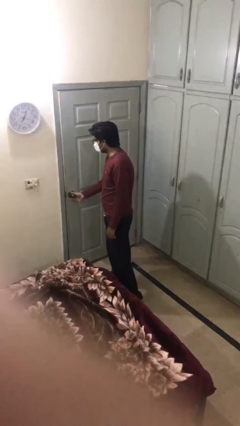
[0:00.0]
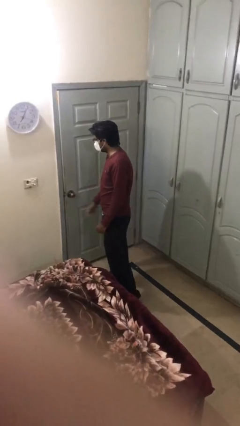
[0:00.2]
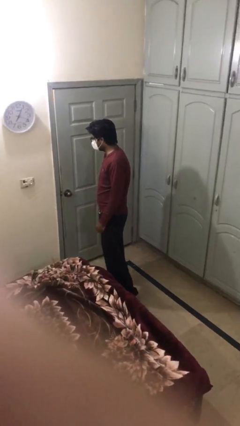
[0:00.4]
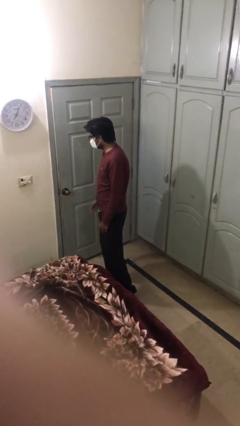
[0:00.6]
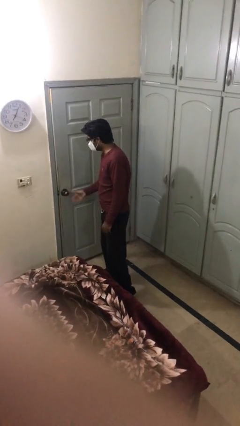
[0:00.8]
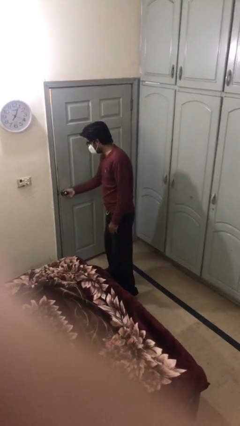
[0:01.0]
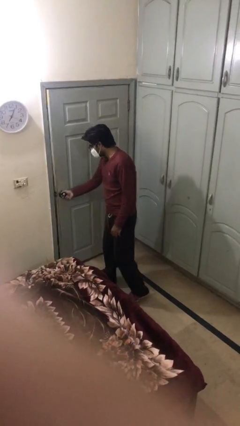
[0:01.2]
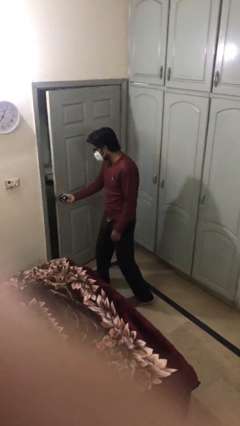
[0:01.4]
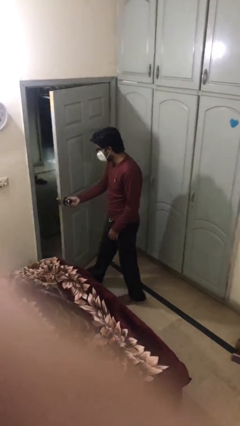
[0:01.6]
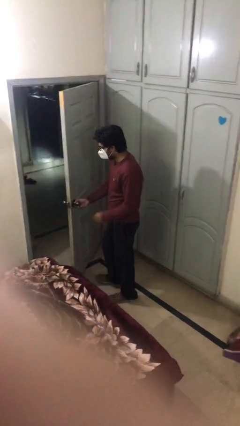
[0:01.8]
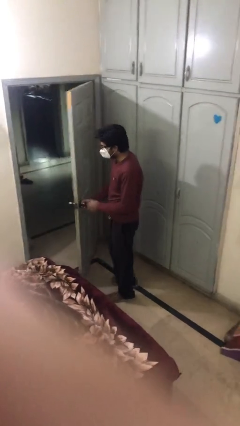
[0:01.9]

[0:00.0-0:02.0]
person opens facility door

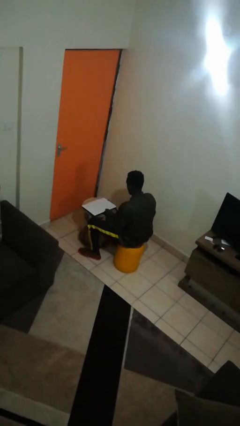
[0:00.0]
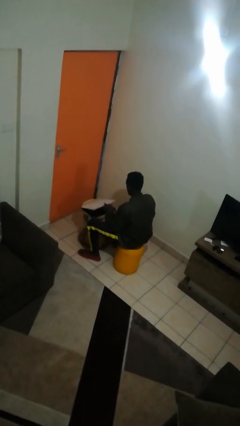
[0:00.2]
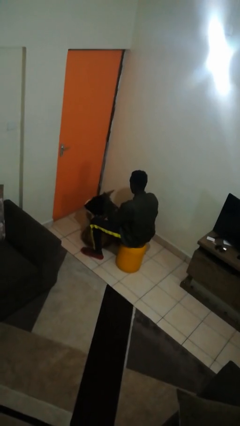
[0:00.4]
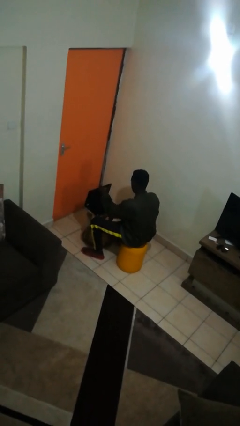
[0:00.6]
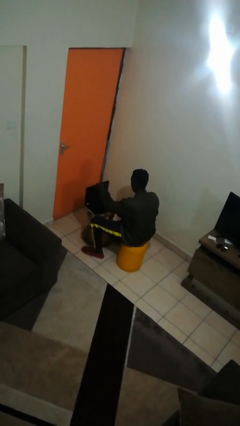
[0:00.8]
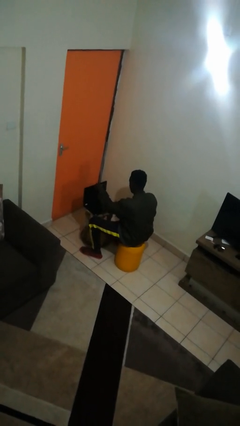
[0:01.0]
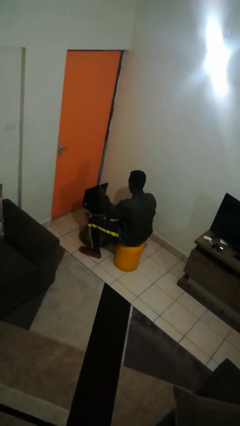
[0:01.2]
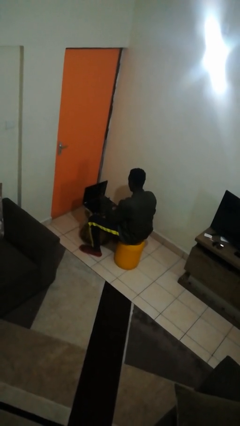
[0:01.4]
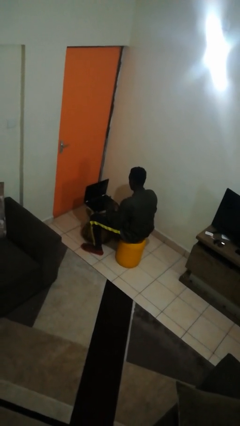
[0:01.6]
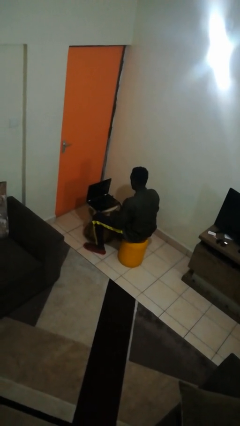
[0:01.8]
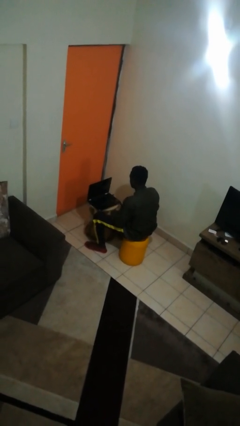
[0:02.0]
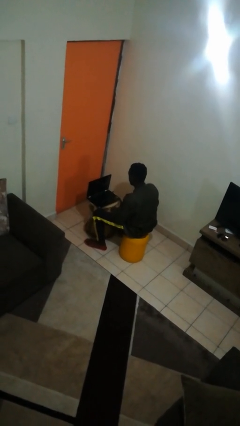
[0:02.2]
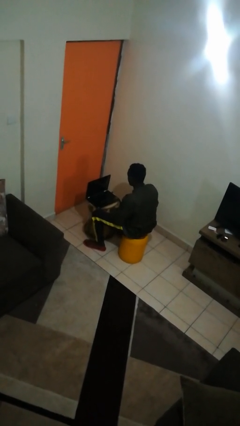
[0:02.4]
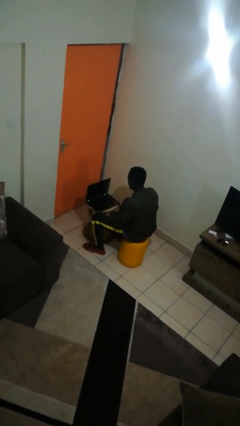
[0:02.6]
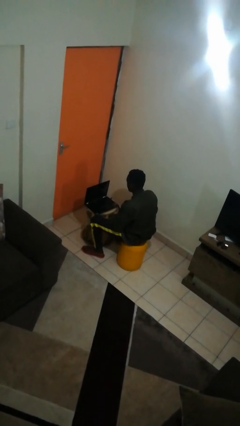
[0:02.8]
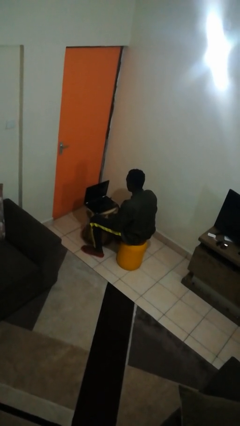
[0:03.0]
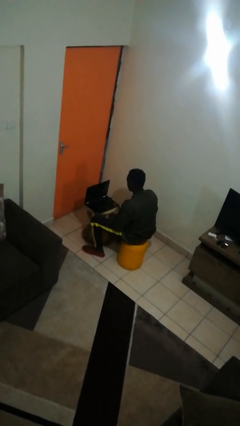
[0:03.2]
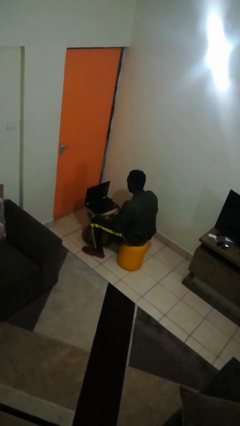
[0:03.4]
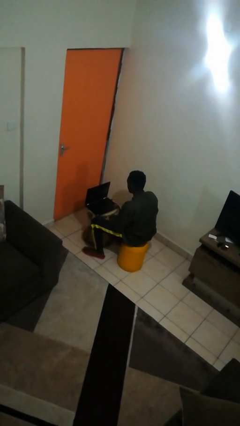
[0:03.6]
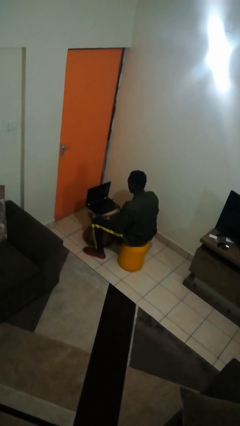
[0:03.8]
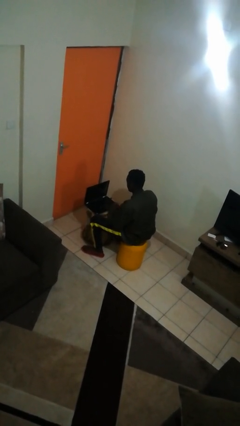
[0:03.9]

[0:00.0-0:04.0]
person opens laptop

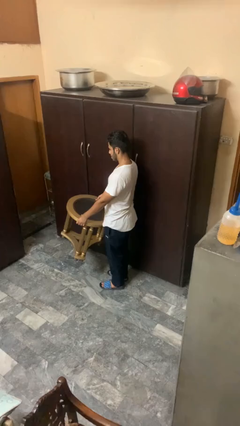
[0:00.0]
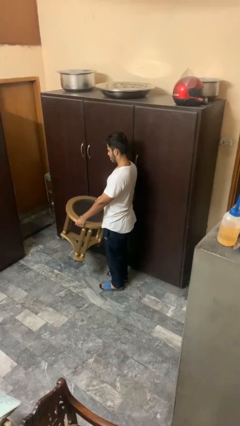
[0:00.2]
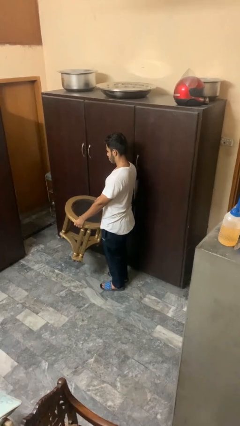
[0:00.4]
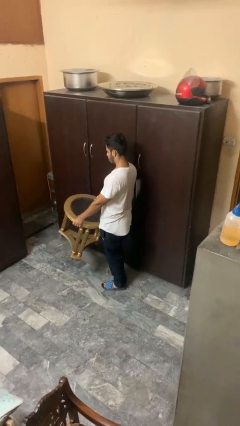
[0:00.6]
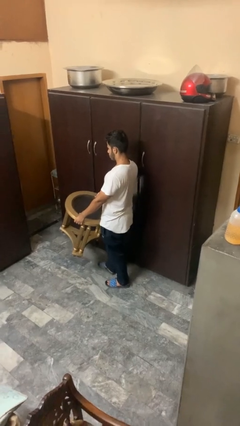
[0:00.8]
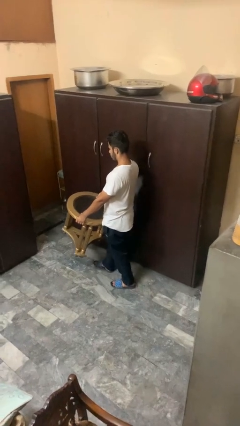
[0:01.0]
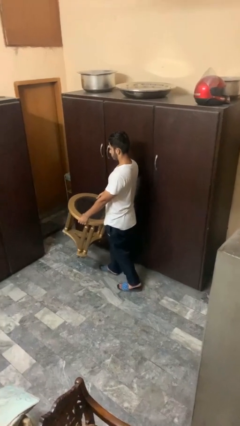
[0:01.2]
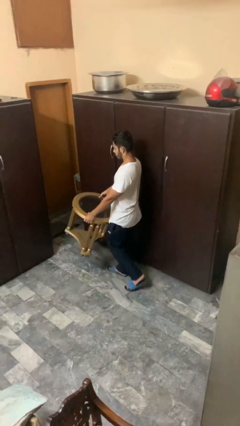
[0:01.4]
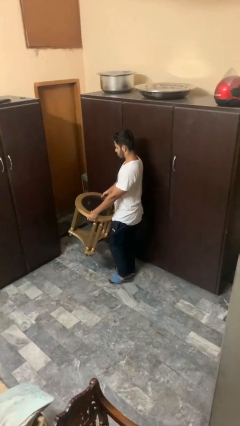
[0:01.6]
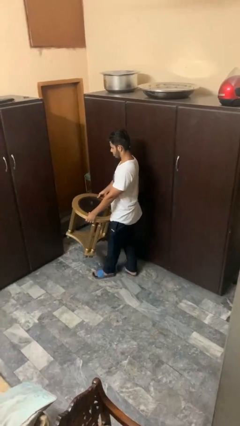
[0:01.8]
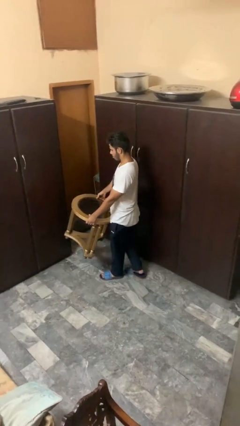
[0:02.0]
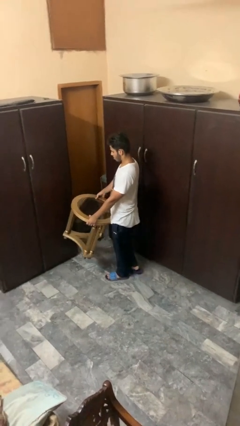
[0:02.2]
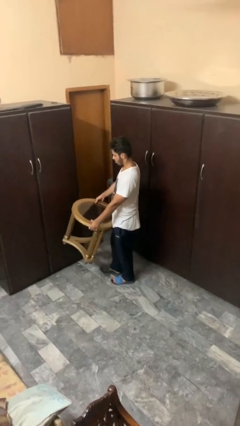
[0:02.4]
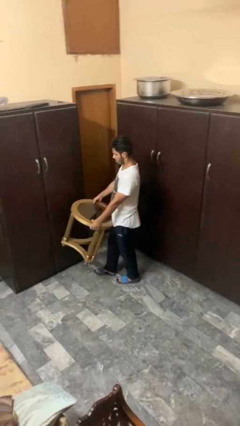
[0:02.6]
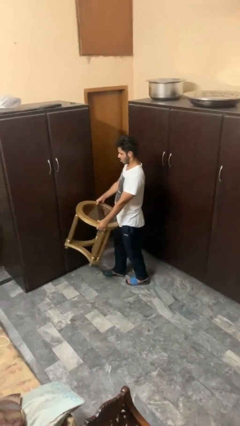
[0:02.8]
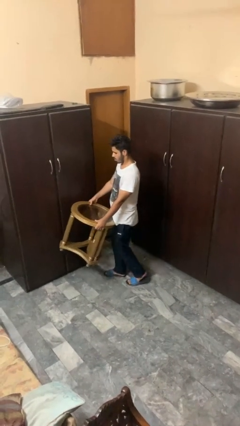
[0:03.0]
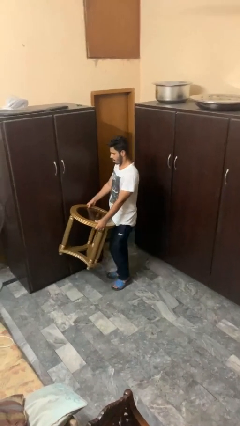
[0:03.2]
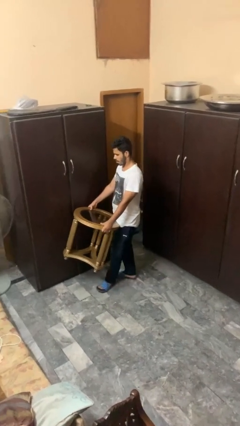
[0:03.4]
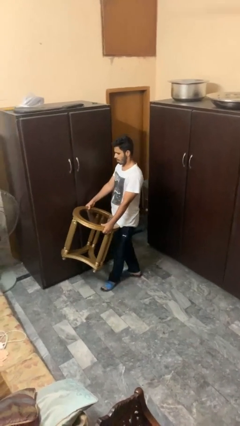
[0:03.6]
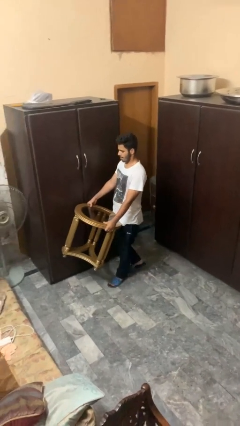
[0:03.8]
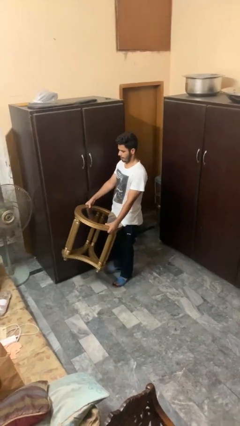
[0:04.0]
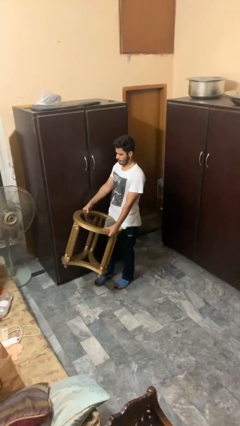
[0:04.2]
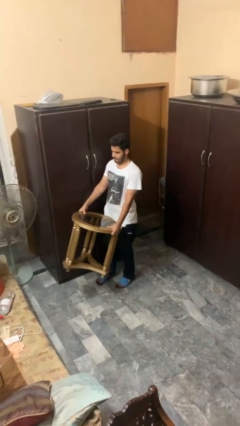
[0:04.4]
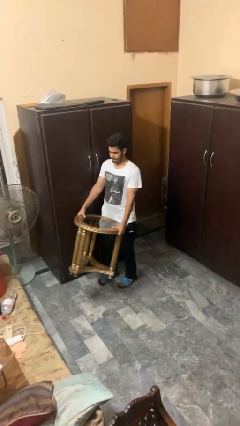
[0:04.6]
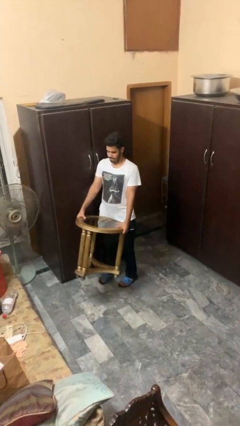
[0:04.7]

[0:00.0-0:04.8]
person carries furniture

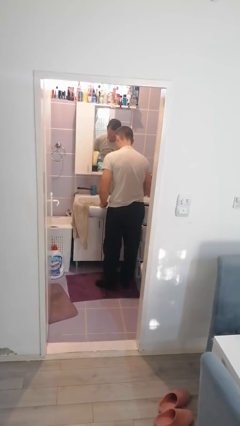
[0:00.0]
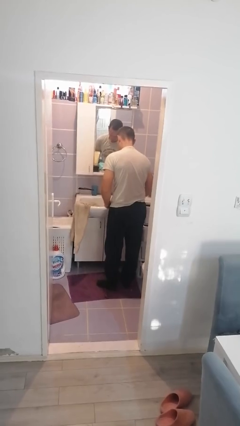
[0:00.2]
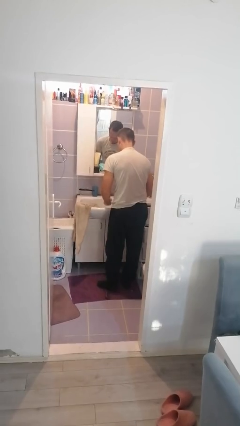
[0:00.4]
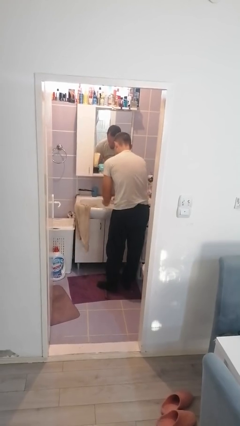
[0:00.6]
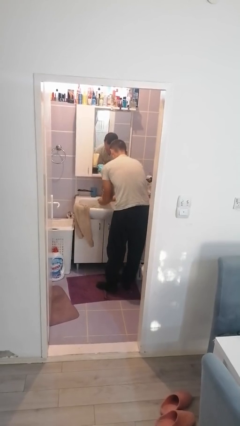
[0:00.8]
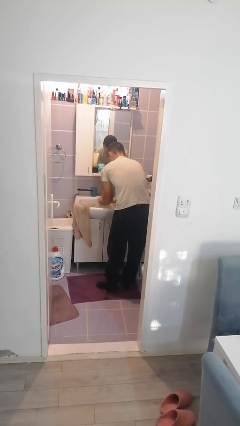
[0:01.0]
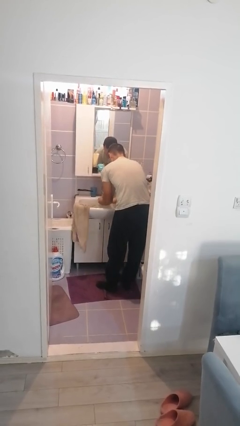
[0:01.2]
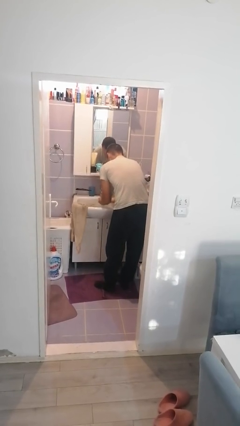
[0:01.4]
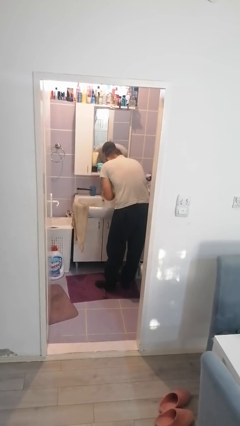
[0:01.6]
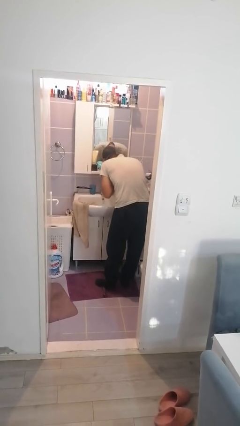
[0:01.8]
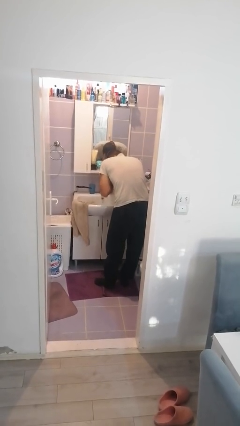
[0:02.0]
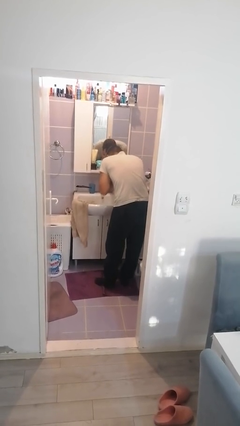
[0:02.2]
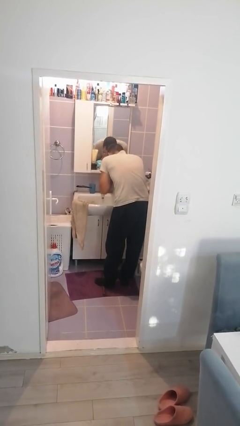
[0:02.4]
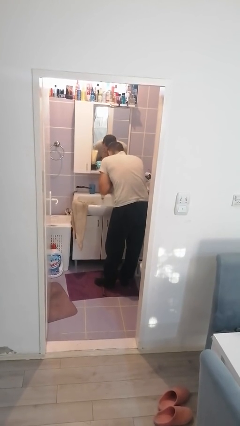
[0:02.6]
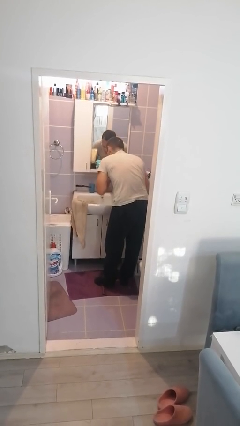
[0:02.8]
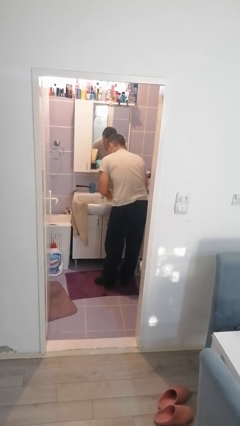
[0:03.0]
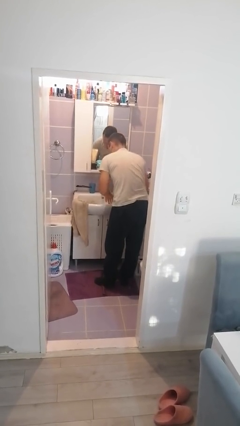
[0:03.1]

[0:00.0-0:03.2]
person washes face

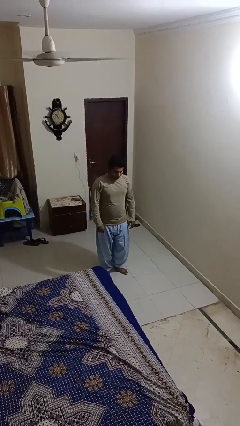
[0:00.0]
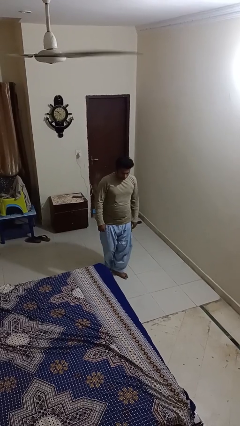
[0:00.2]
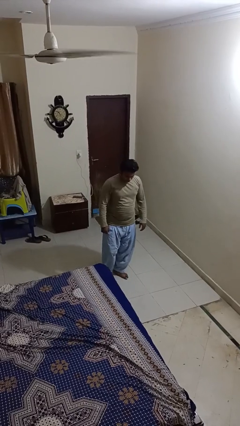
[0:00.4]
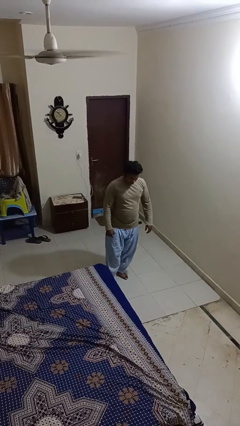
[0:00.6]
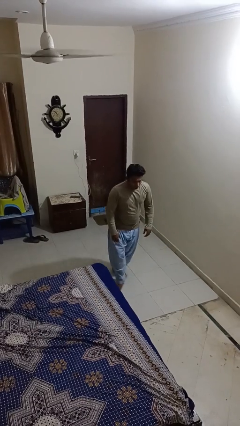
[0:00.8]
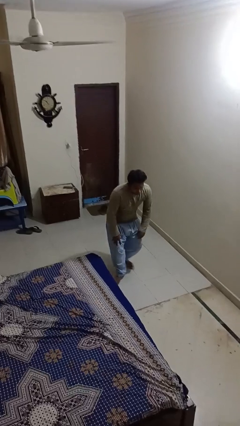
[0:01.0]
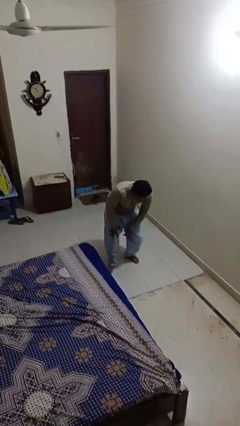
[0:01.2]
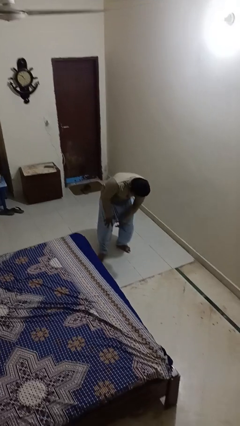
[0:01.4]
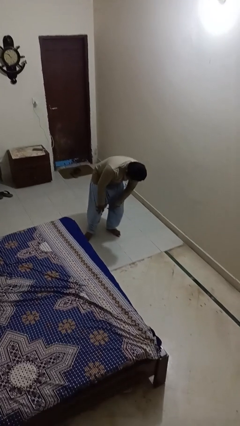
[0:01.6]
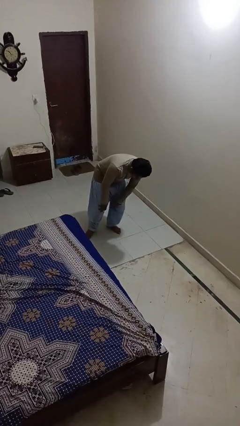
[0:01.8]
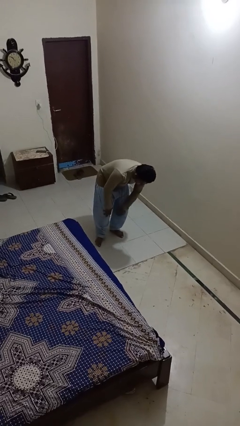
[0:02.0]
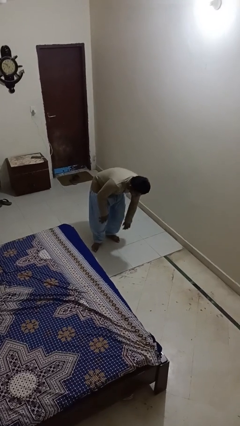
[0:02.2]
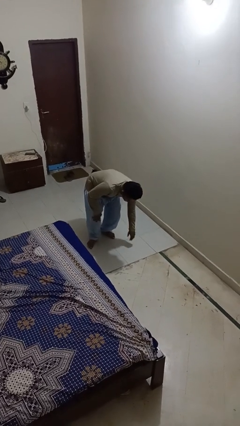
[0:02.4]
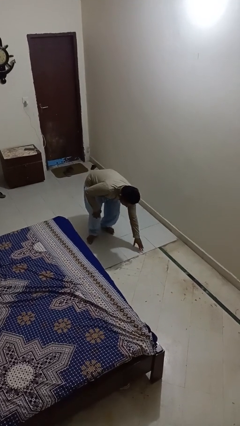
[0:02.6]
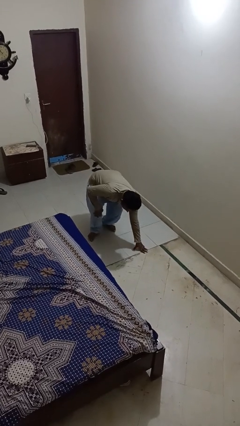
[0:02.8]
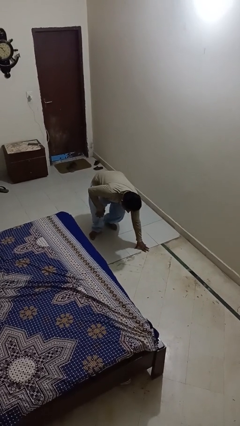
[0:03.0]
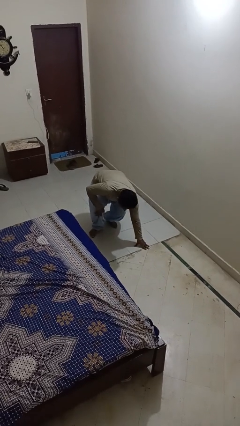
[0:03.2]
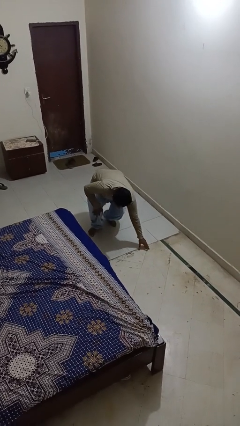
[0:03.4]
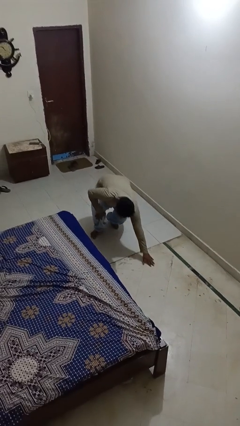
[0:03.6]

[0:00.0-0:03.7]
person trips on object on floor
